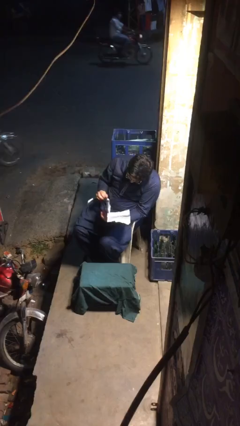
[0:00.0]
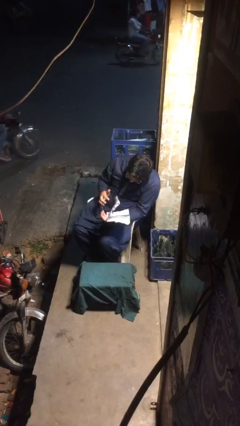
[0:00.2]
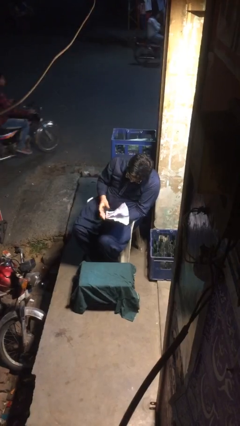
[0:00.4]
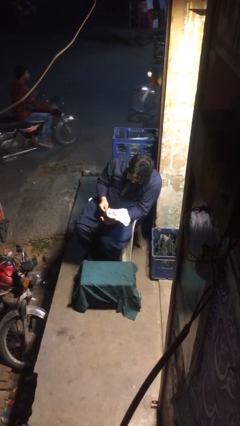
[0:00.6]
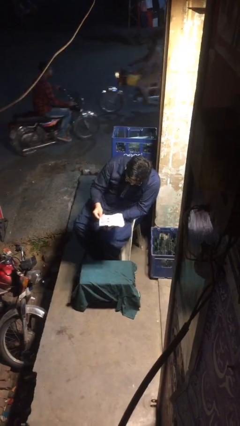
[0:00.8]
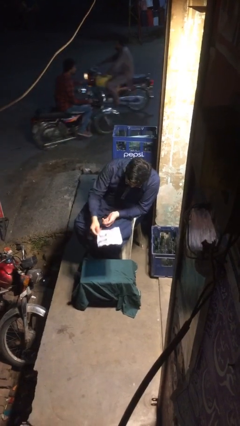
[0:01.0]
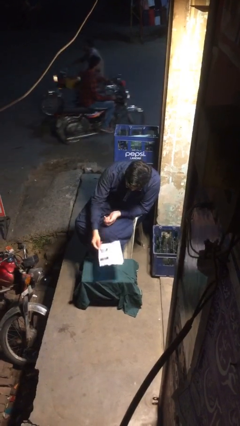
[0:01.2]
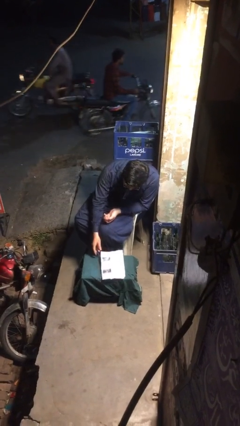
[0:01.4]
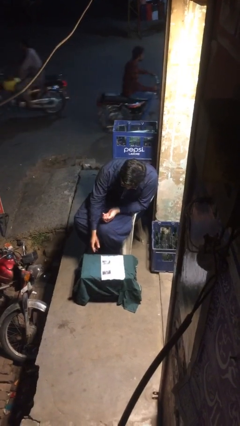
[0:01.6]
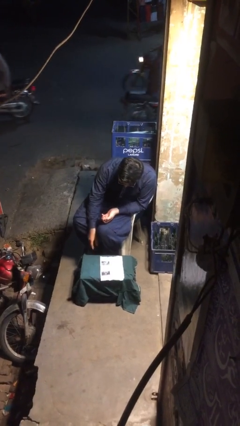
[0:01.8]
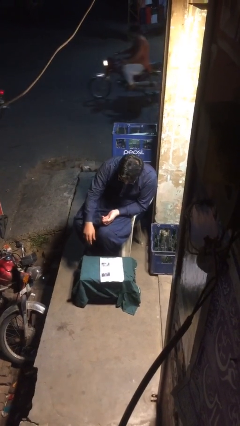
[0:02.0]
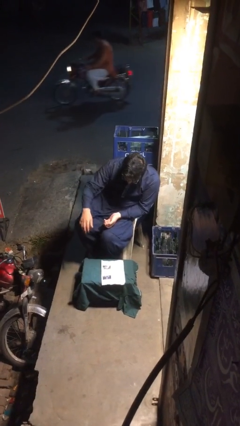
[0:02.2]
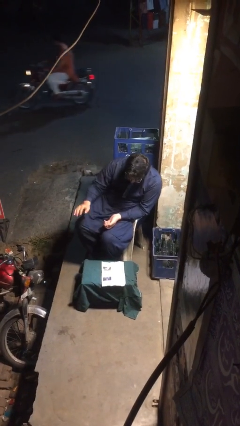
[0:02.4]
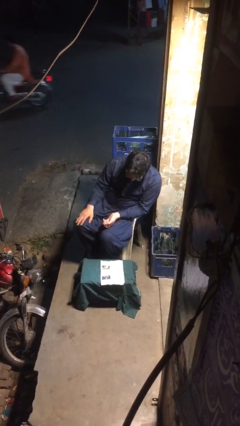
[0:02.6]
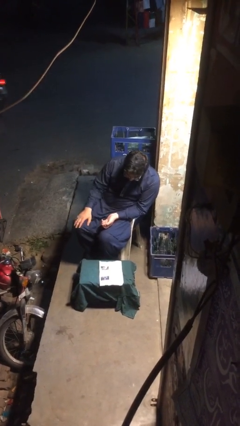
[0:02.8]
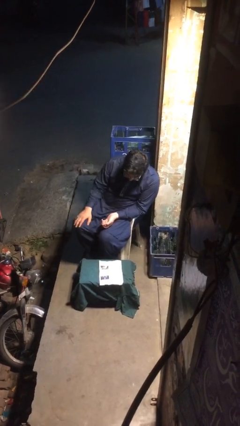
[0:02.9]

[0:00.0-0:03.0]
person puts down object on table

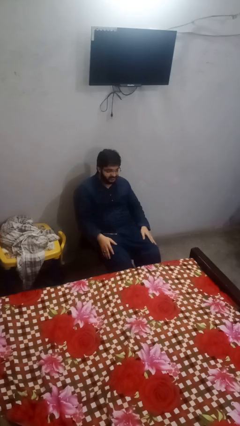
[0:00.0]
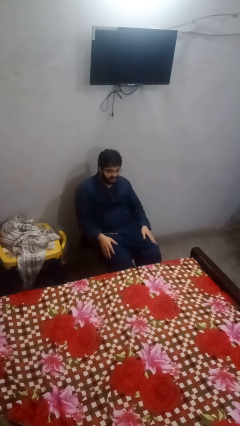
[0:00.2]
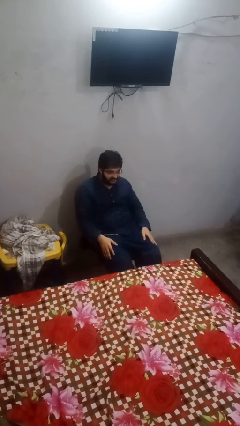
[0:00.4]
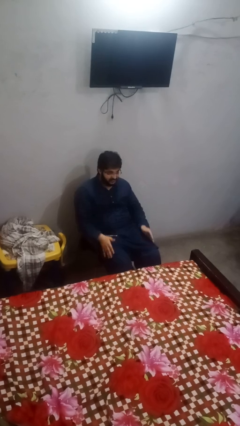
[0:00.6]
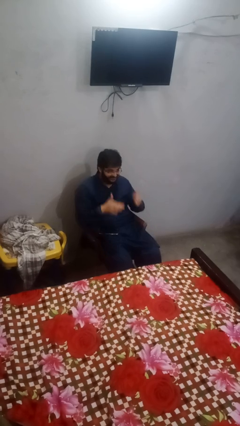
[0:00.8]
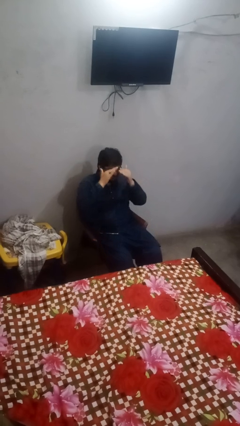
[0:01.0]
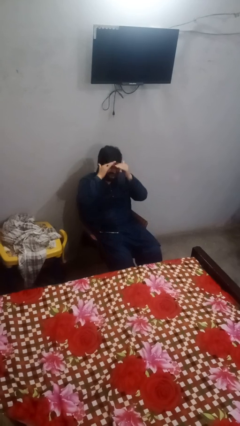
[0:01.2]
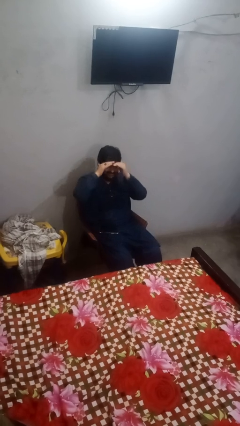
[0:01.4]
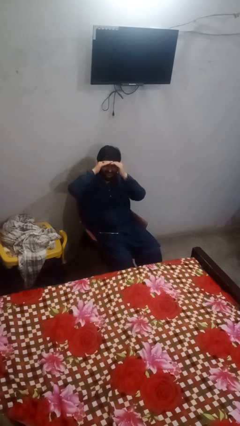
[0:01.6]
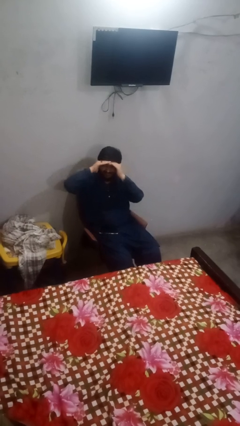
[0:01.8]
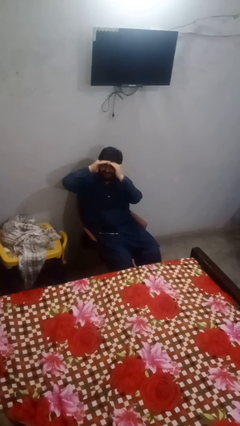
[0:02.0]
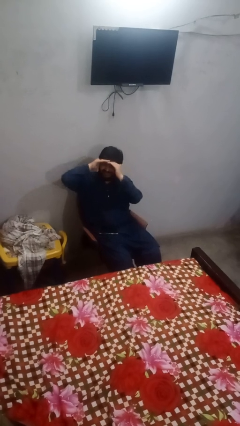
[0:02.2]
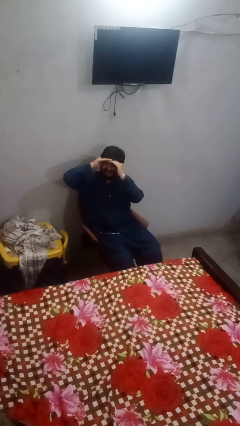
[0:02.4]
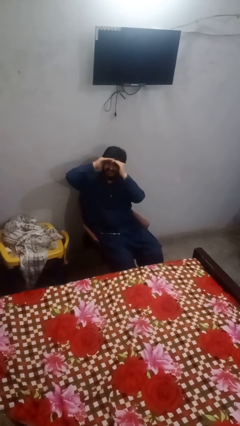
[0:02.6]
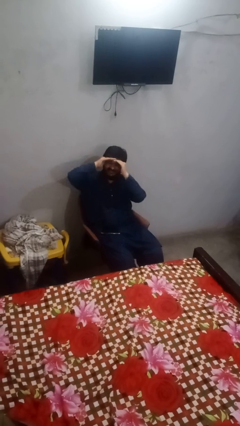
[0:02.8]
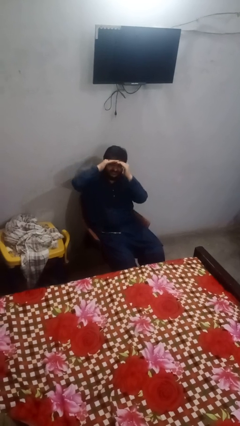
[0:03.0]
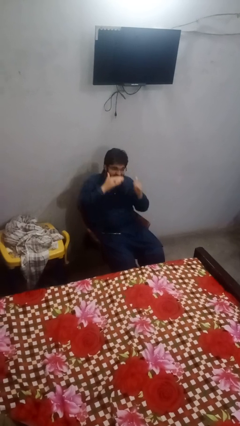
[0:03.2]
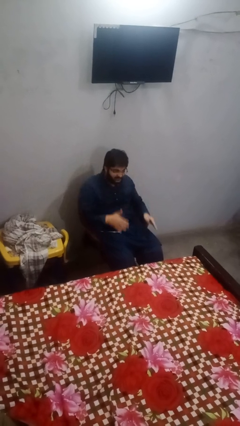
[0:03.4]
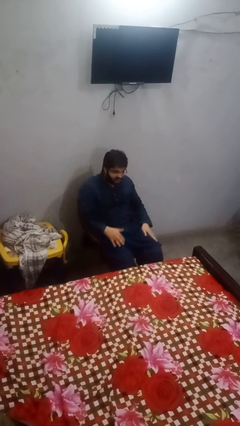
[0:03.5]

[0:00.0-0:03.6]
person shades eyes

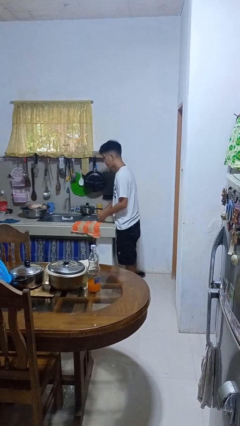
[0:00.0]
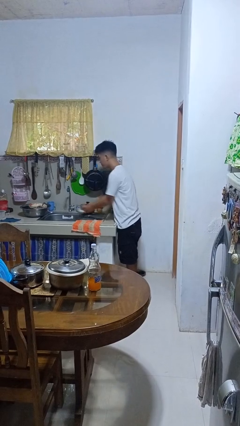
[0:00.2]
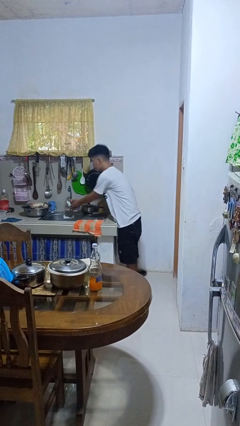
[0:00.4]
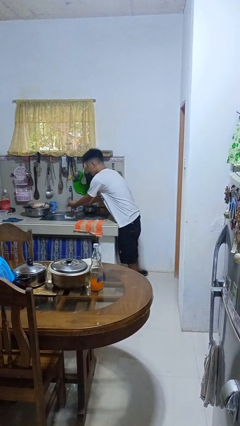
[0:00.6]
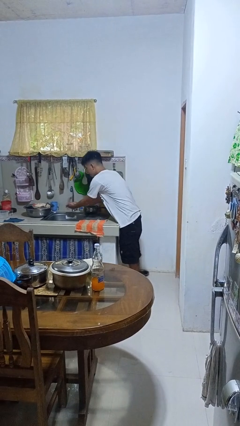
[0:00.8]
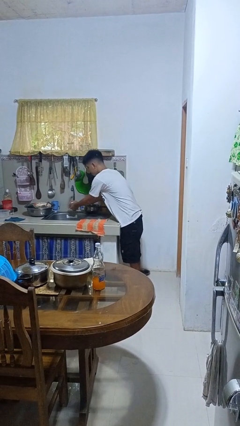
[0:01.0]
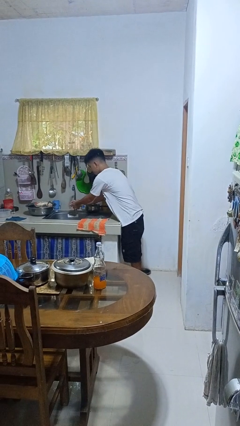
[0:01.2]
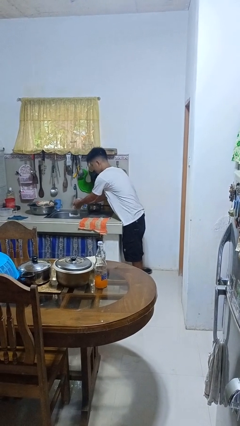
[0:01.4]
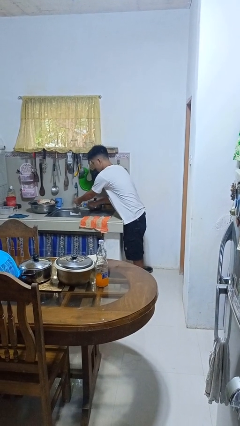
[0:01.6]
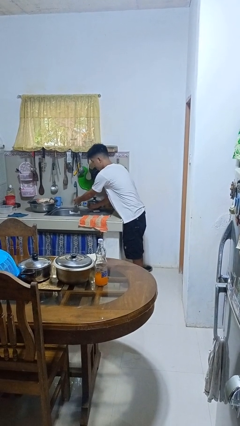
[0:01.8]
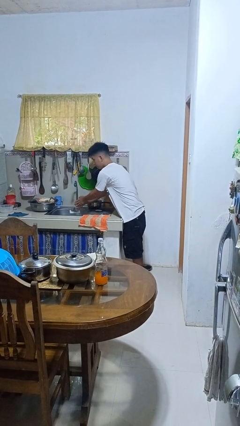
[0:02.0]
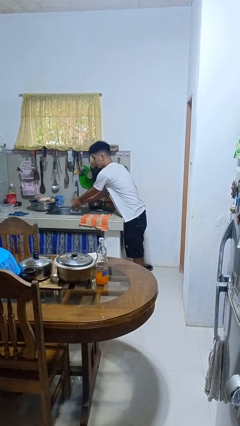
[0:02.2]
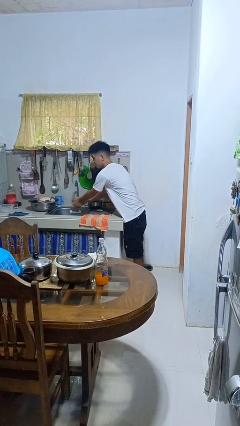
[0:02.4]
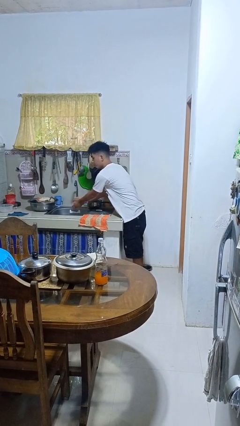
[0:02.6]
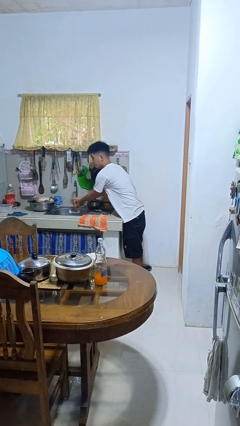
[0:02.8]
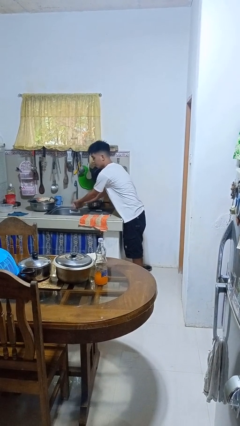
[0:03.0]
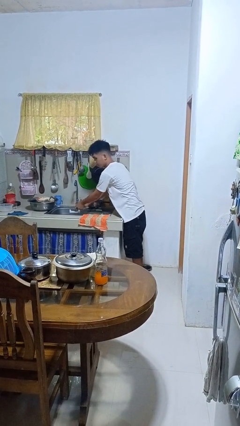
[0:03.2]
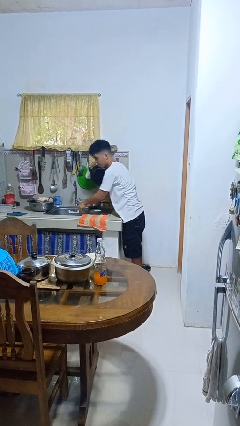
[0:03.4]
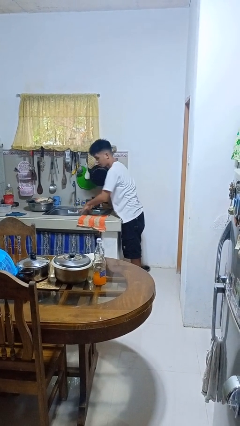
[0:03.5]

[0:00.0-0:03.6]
person washes hands

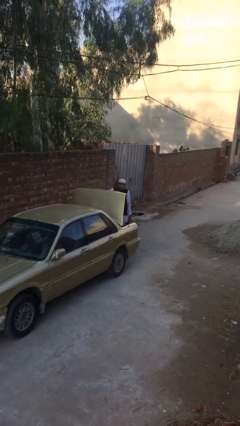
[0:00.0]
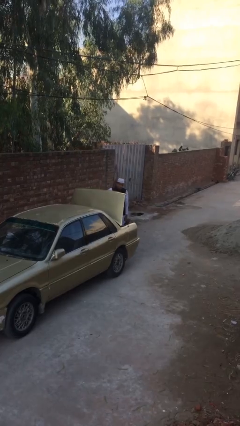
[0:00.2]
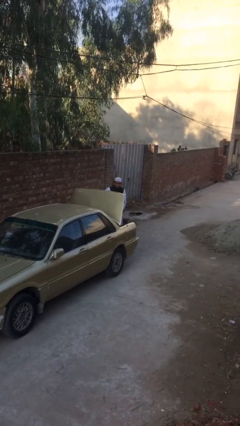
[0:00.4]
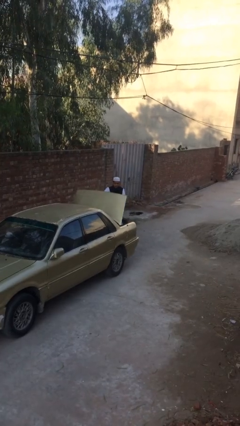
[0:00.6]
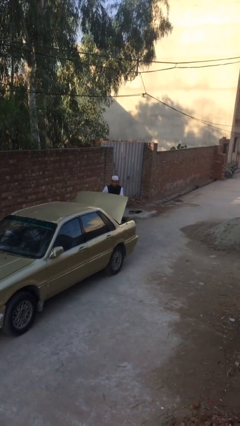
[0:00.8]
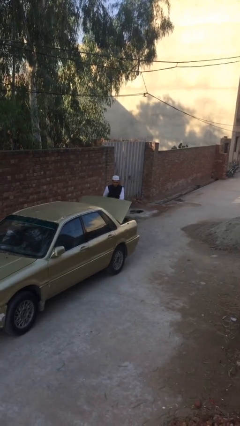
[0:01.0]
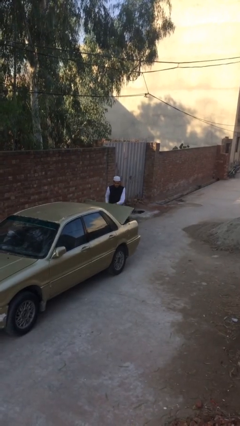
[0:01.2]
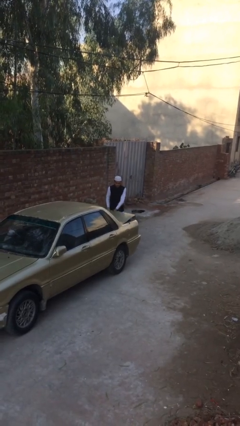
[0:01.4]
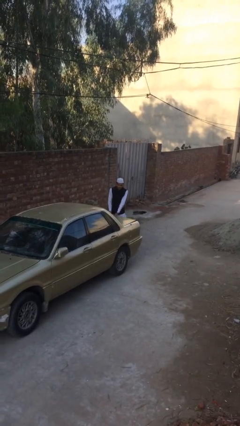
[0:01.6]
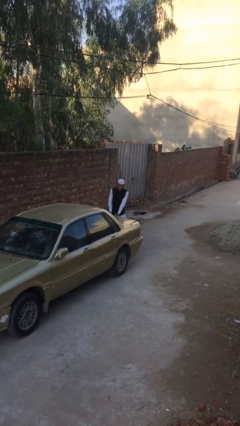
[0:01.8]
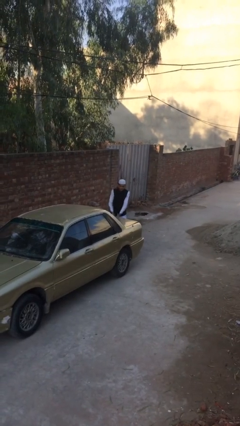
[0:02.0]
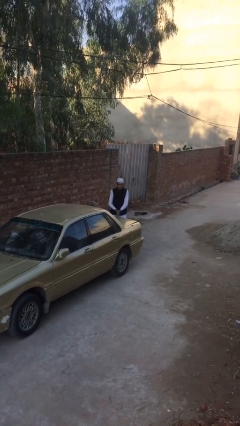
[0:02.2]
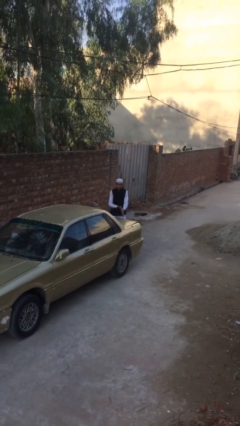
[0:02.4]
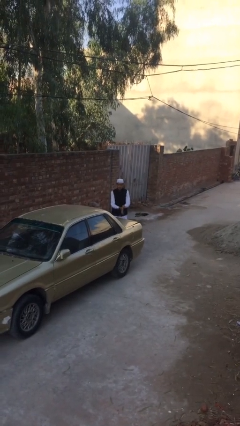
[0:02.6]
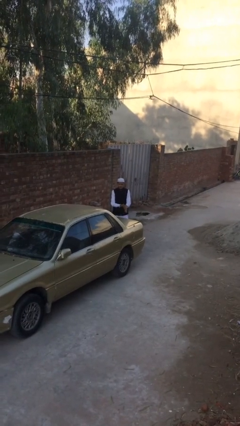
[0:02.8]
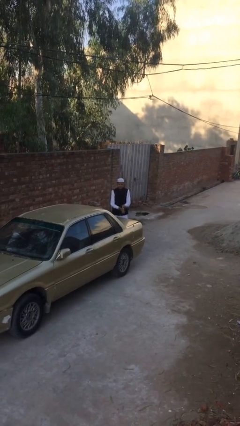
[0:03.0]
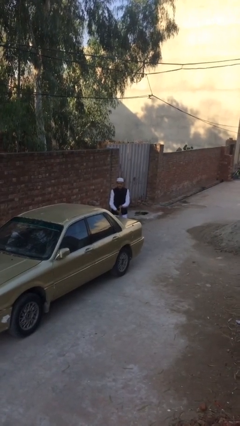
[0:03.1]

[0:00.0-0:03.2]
person closes car trunk

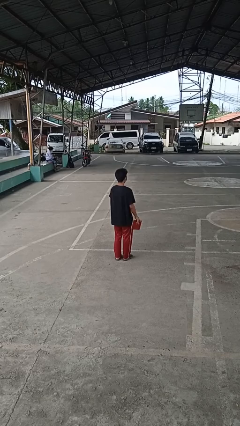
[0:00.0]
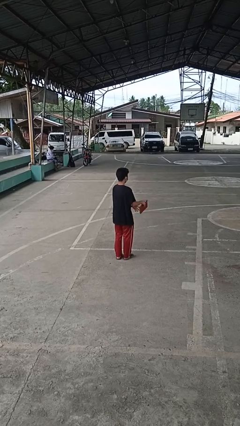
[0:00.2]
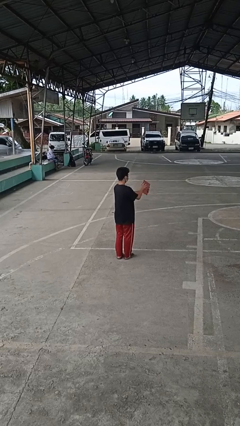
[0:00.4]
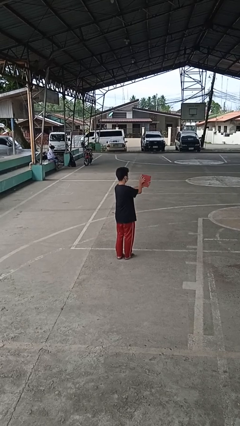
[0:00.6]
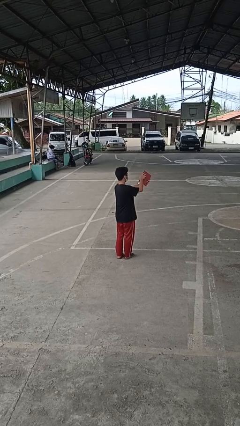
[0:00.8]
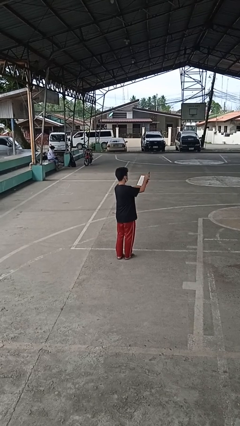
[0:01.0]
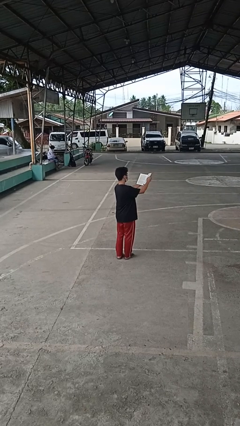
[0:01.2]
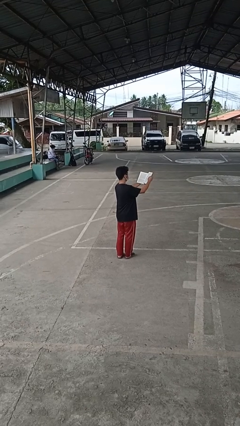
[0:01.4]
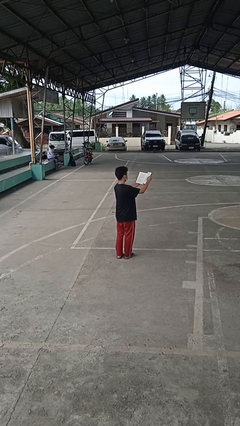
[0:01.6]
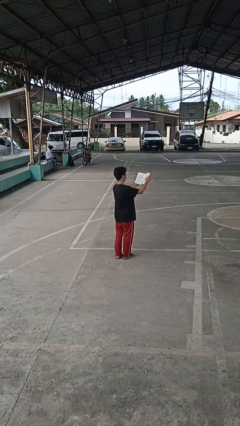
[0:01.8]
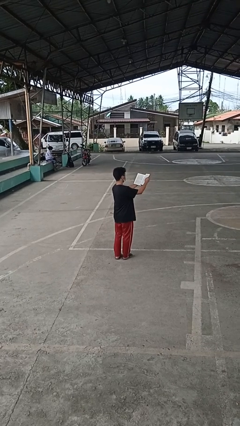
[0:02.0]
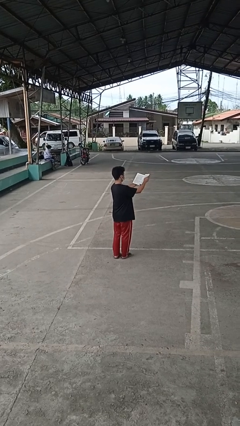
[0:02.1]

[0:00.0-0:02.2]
person reads book

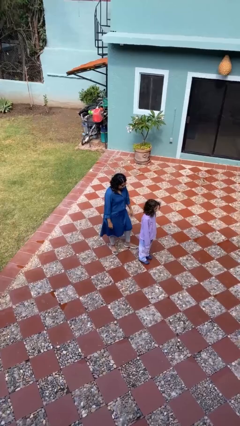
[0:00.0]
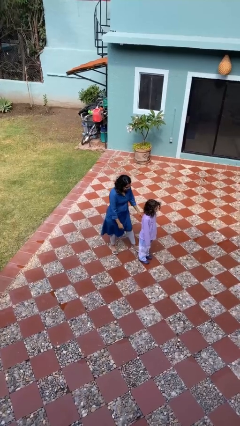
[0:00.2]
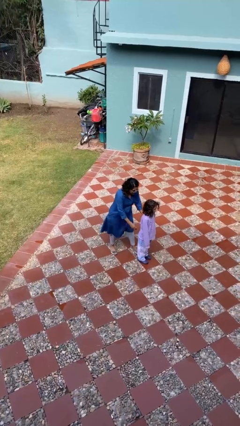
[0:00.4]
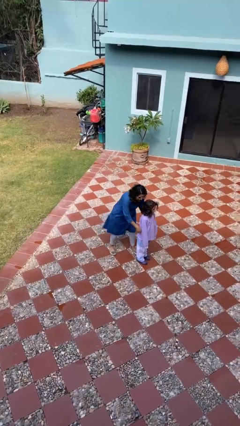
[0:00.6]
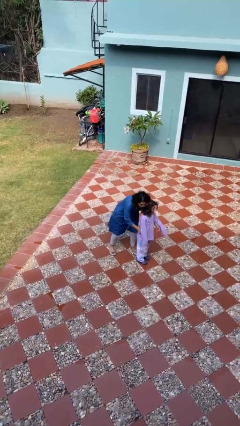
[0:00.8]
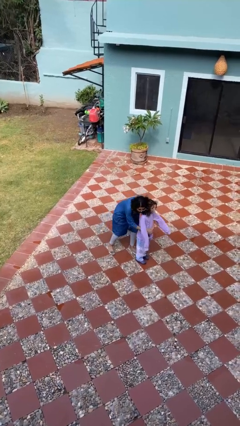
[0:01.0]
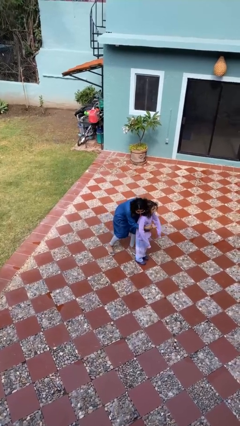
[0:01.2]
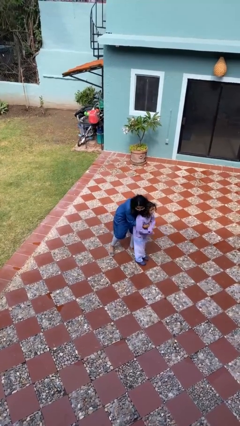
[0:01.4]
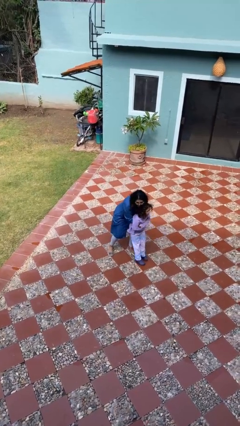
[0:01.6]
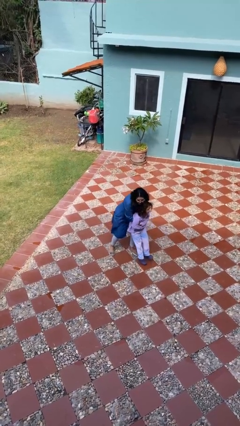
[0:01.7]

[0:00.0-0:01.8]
person picks up person

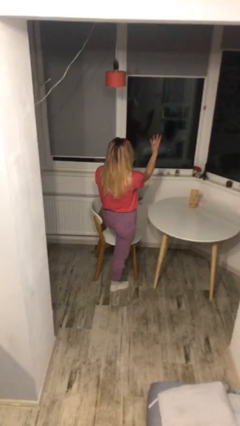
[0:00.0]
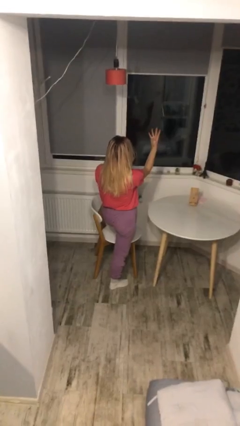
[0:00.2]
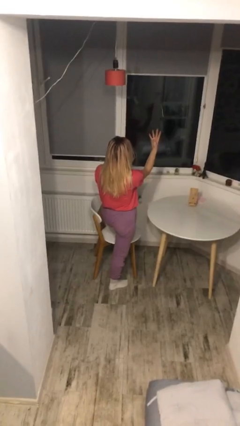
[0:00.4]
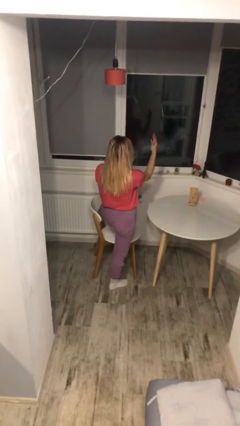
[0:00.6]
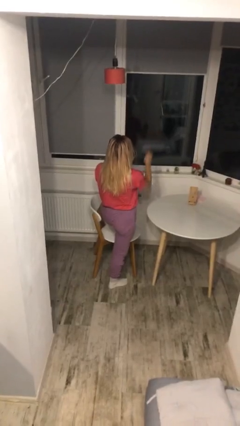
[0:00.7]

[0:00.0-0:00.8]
person gestures number four
